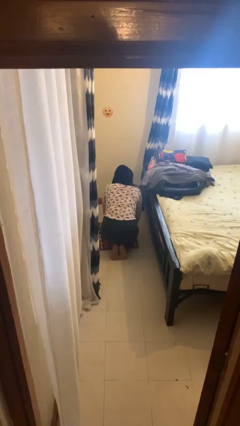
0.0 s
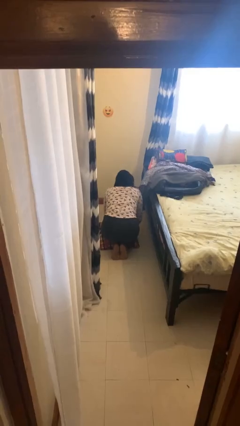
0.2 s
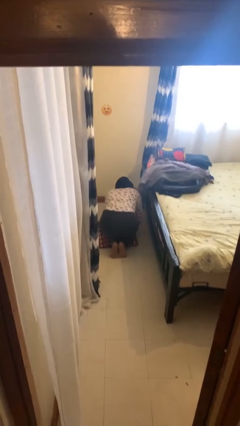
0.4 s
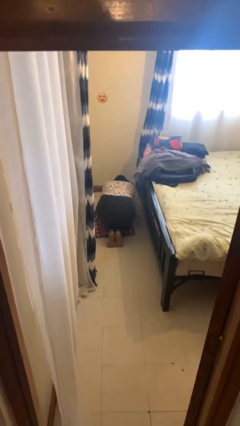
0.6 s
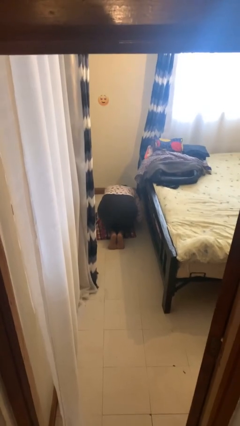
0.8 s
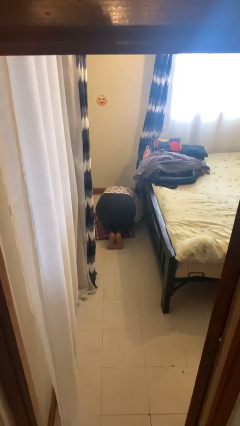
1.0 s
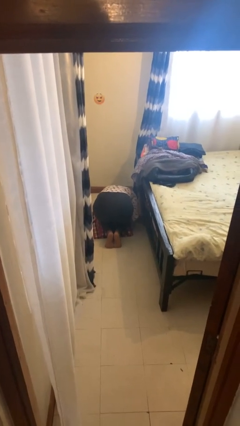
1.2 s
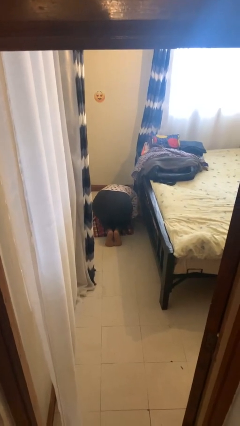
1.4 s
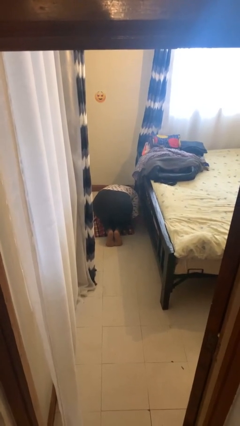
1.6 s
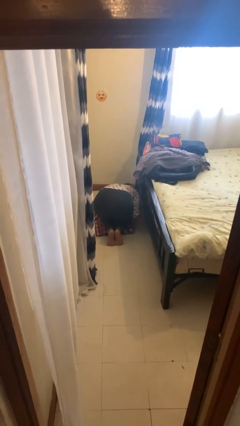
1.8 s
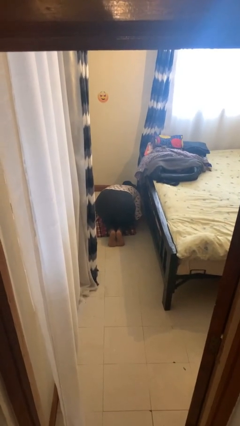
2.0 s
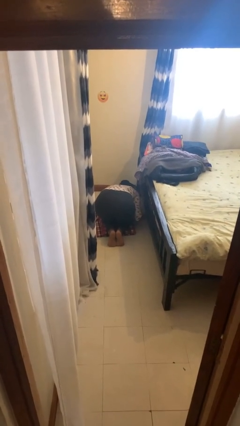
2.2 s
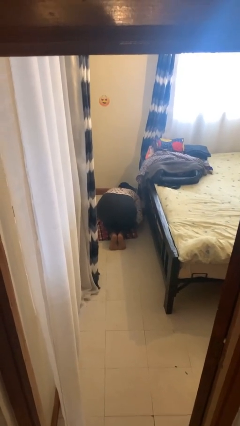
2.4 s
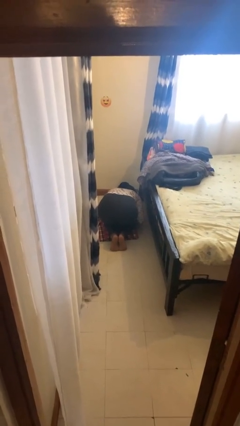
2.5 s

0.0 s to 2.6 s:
person searches under bed

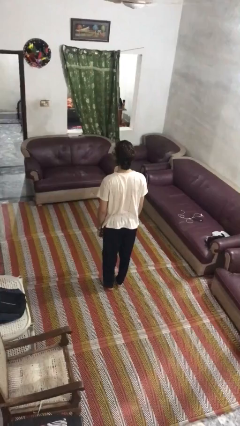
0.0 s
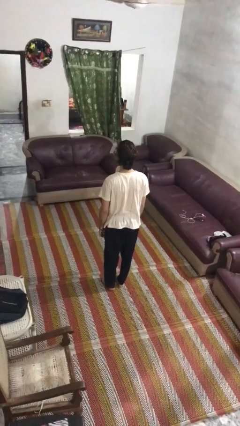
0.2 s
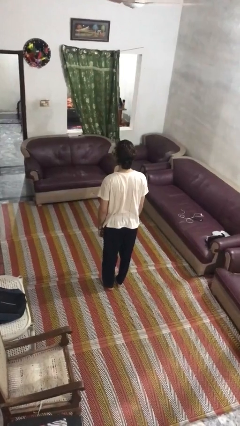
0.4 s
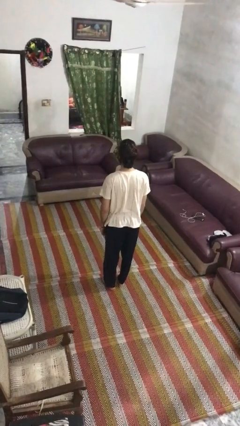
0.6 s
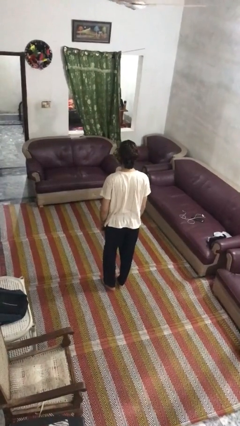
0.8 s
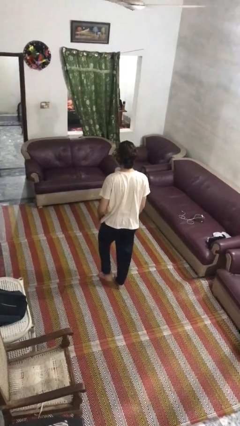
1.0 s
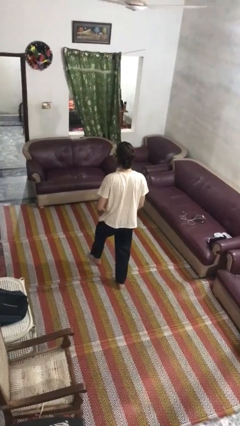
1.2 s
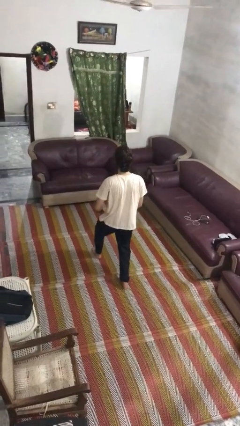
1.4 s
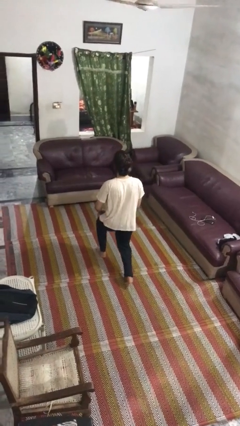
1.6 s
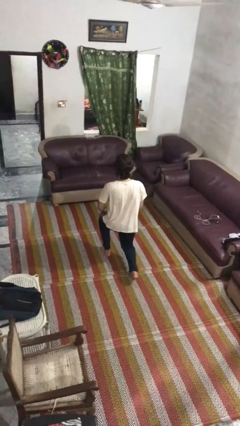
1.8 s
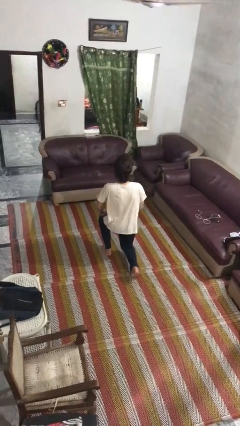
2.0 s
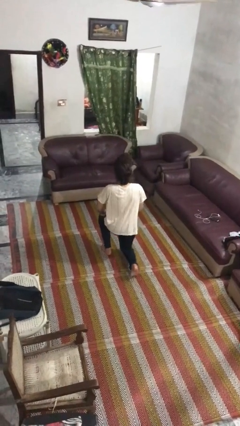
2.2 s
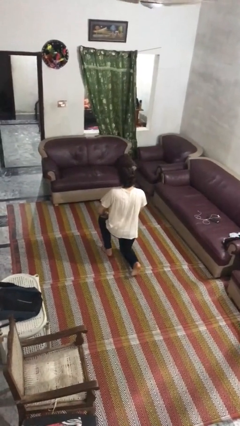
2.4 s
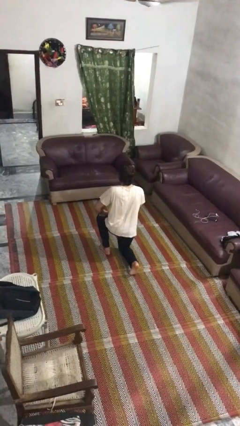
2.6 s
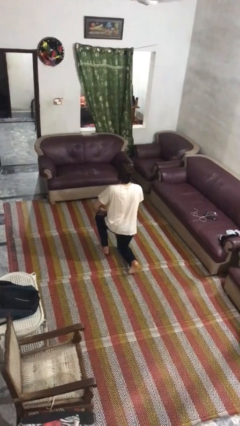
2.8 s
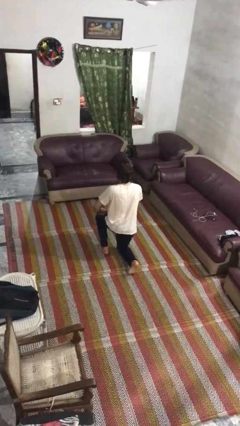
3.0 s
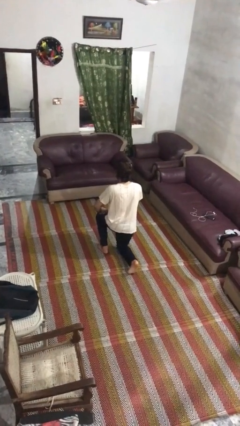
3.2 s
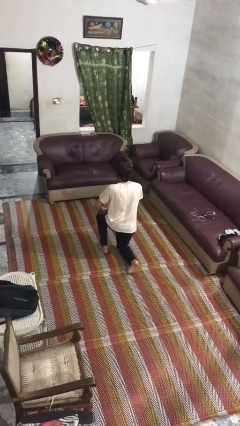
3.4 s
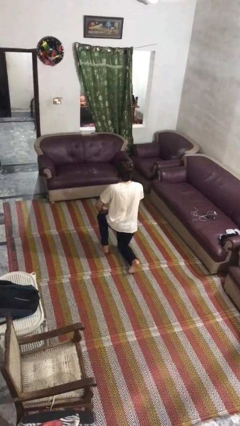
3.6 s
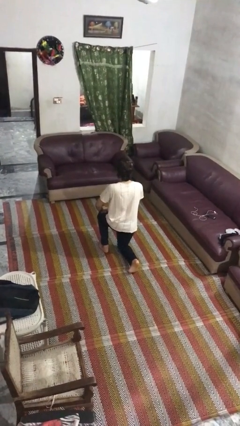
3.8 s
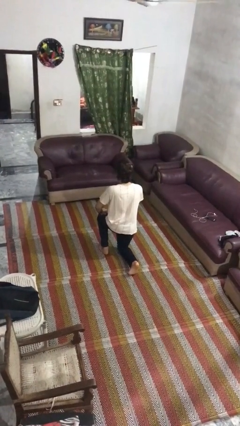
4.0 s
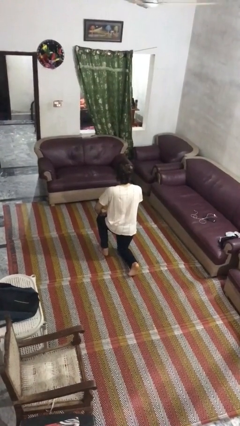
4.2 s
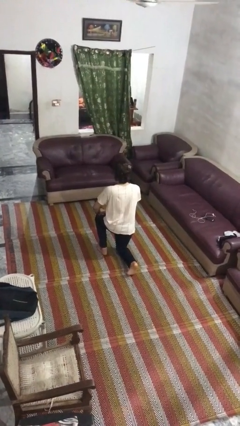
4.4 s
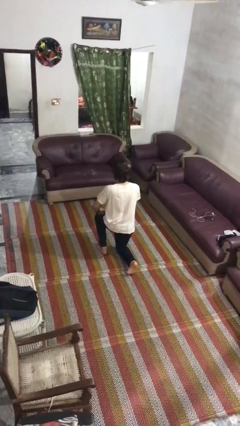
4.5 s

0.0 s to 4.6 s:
person kneels

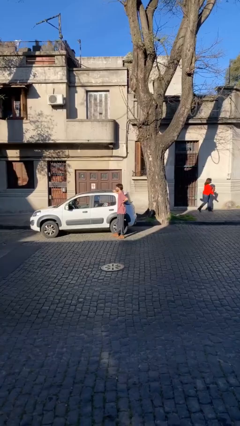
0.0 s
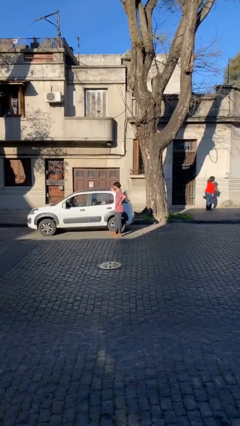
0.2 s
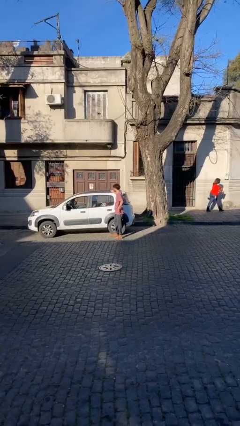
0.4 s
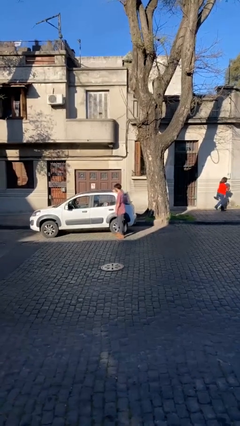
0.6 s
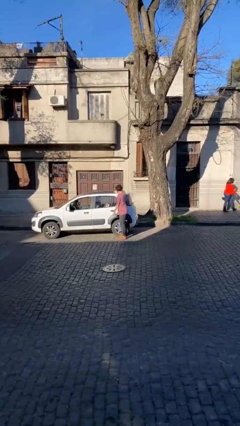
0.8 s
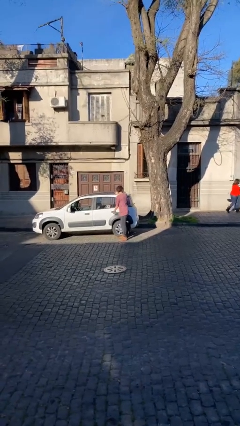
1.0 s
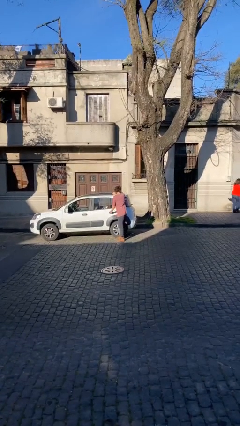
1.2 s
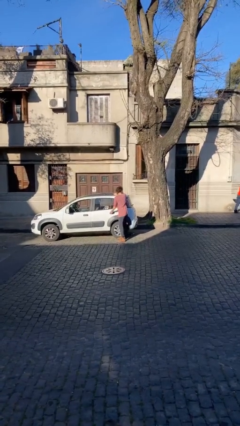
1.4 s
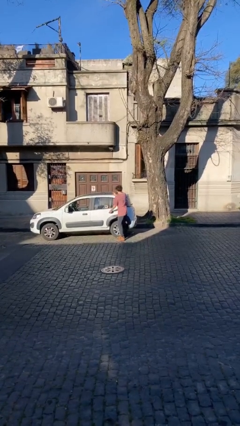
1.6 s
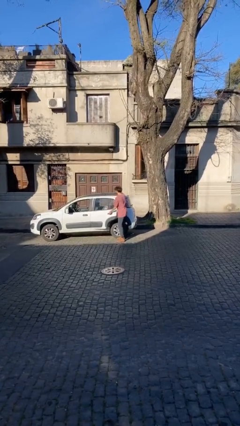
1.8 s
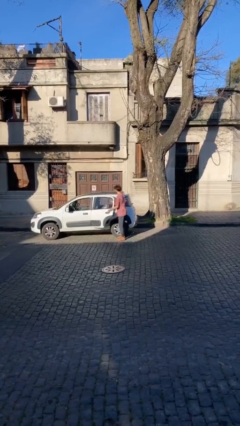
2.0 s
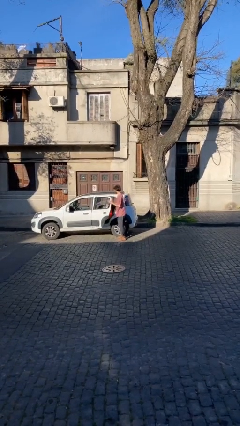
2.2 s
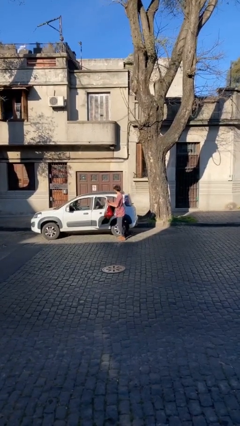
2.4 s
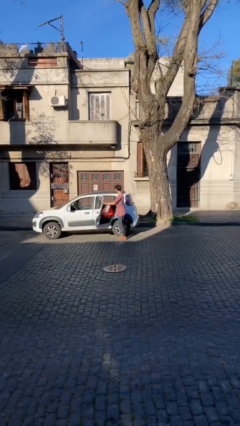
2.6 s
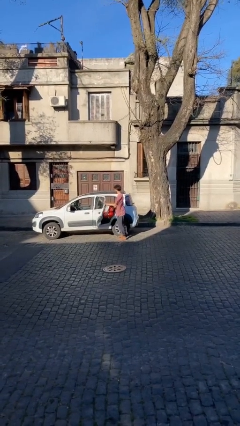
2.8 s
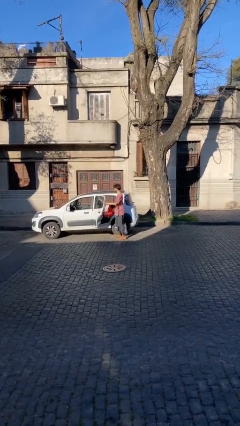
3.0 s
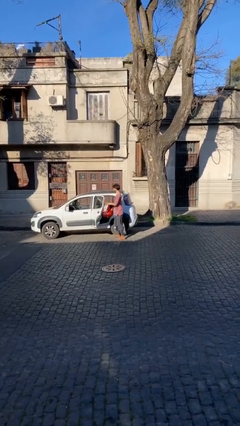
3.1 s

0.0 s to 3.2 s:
person opens car door

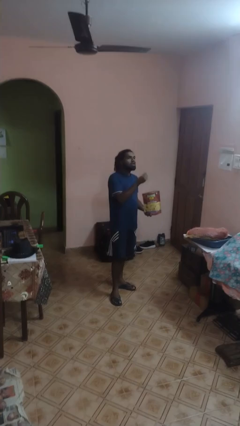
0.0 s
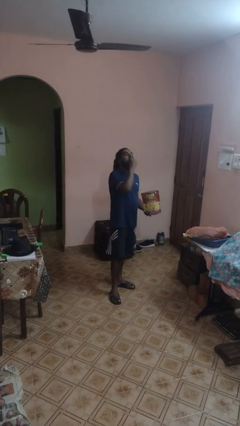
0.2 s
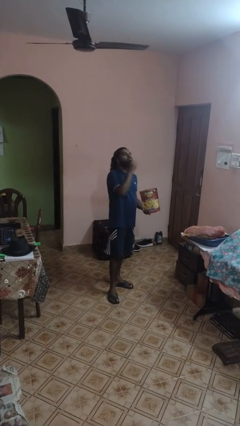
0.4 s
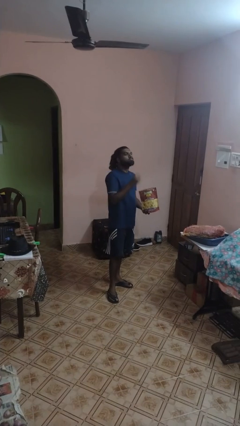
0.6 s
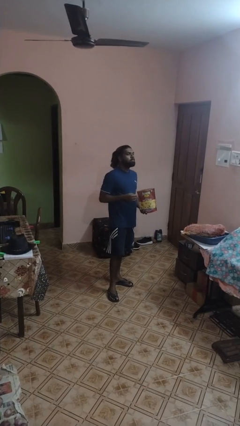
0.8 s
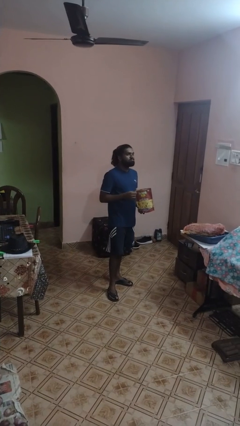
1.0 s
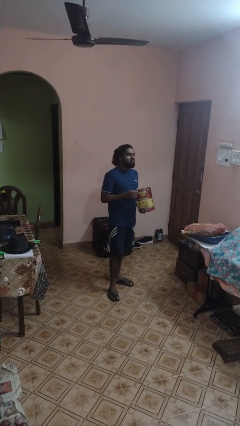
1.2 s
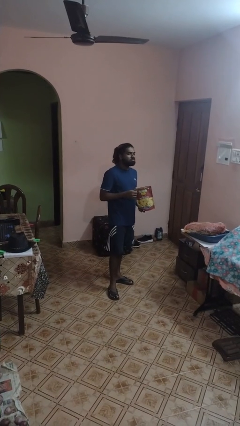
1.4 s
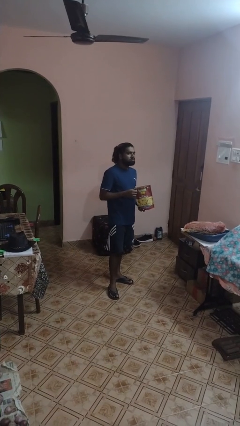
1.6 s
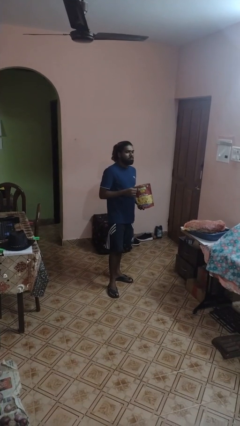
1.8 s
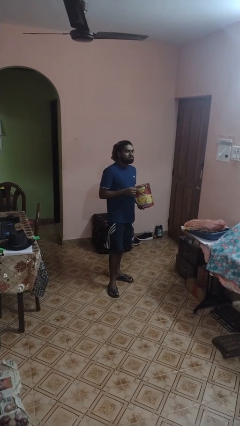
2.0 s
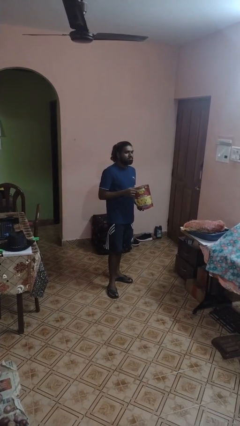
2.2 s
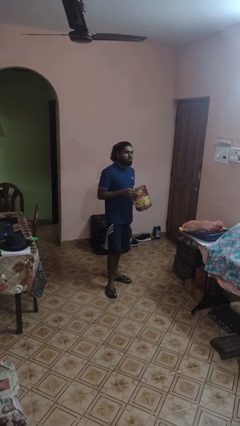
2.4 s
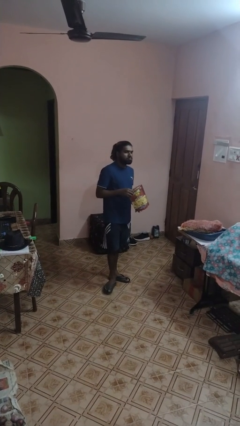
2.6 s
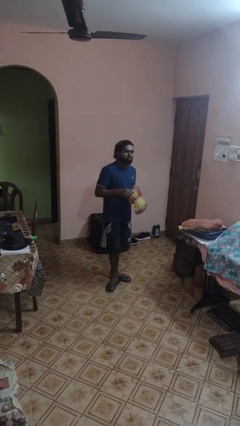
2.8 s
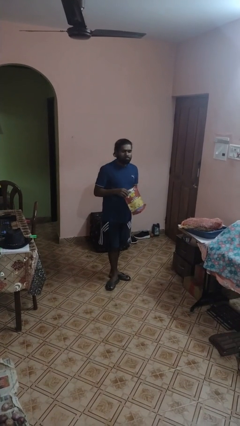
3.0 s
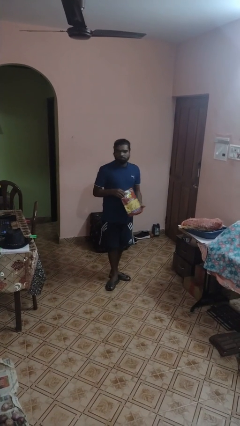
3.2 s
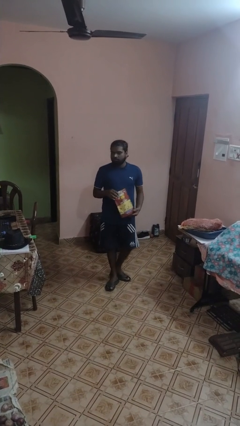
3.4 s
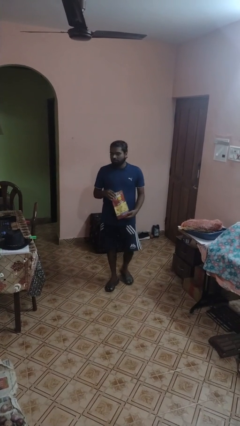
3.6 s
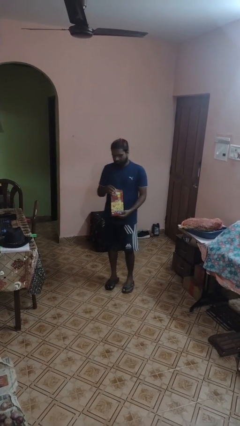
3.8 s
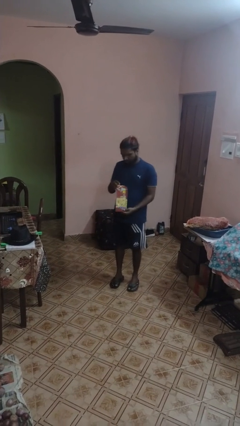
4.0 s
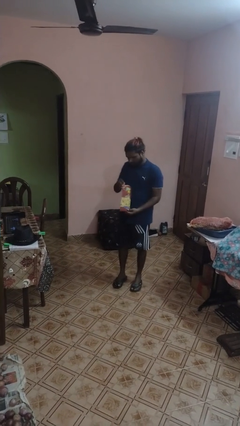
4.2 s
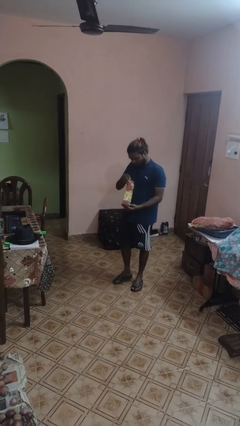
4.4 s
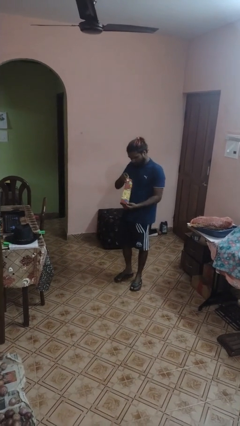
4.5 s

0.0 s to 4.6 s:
person eats snack from bag

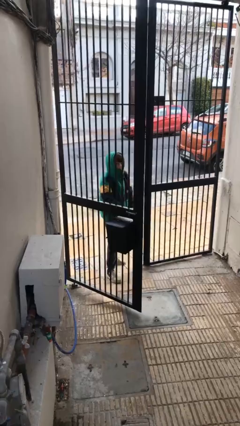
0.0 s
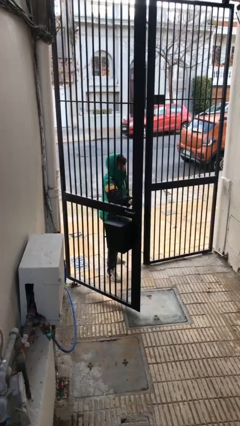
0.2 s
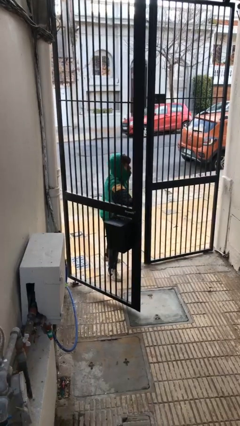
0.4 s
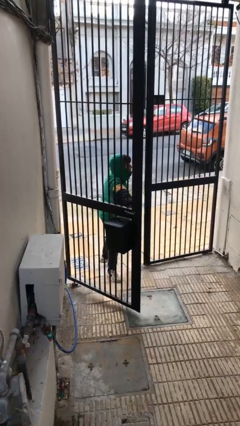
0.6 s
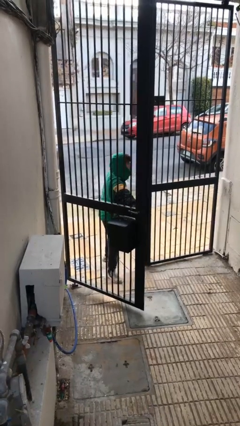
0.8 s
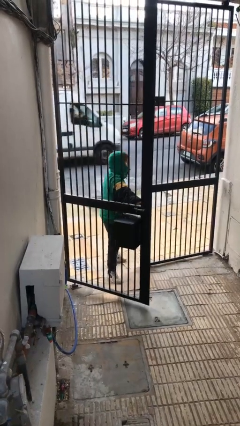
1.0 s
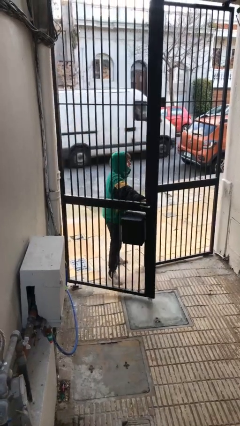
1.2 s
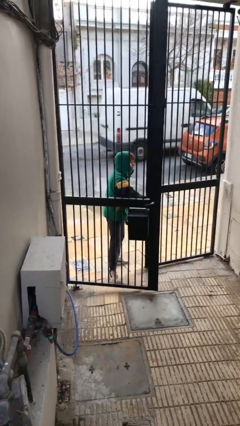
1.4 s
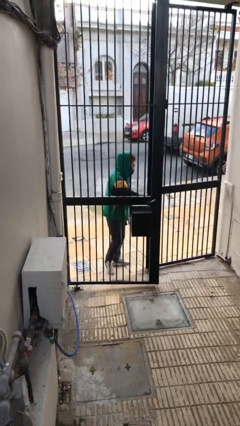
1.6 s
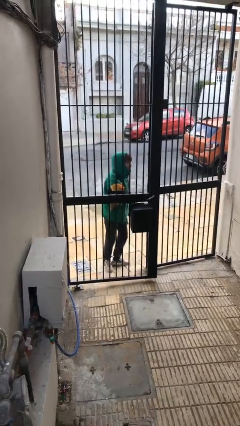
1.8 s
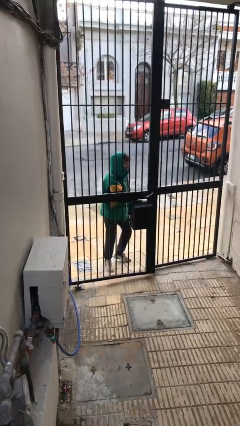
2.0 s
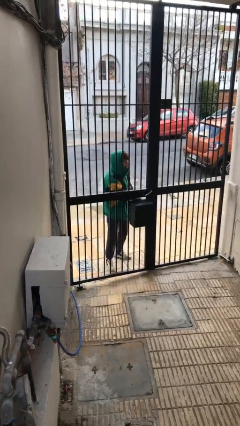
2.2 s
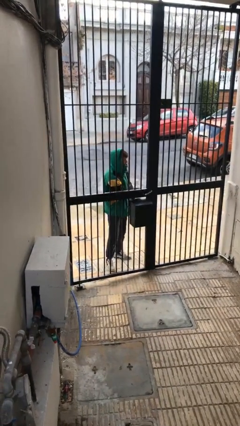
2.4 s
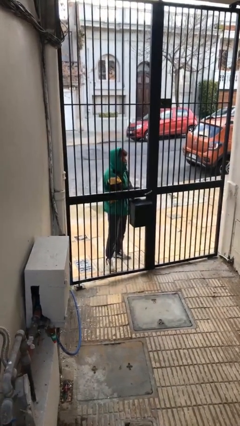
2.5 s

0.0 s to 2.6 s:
person closes gate
